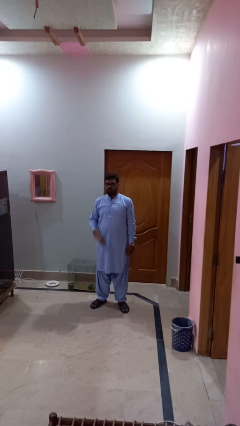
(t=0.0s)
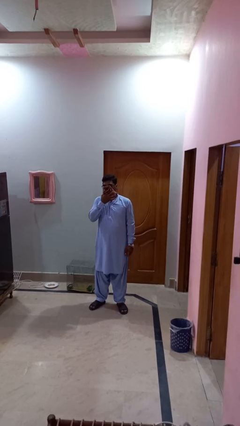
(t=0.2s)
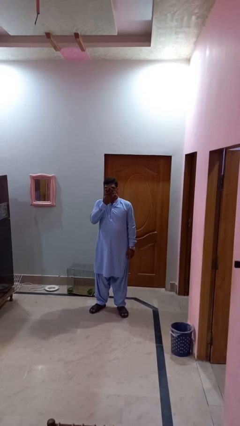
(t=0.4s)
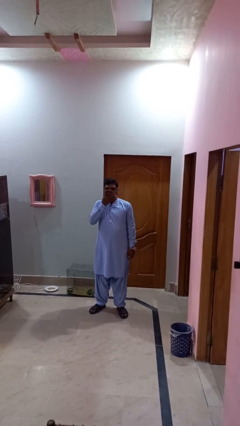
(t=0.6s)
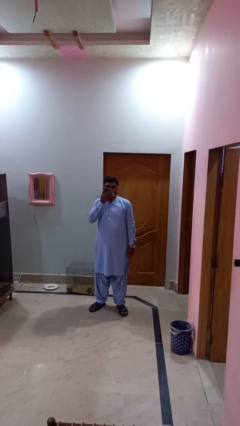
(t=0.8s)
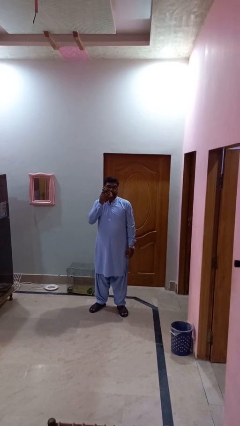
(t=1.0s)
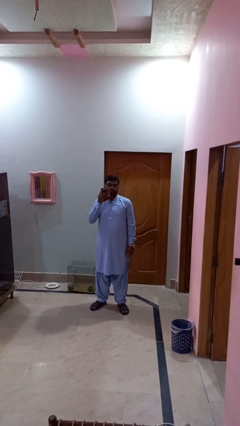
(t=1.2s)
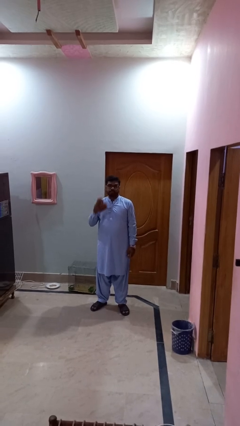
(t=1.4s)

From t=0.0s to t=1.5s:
person wipes mouth with napkin

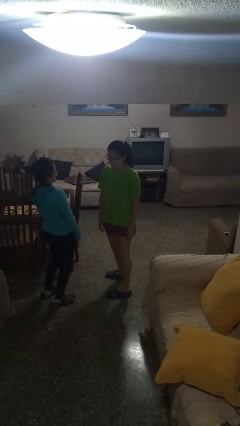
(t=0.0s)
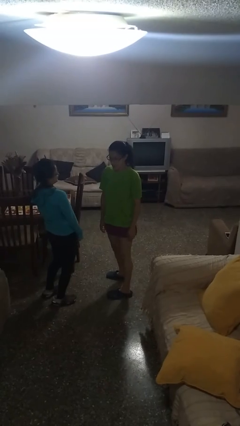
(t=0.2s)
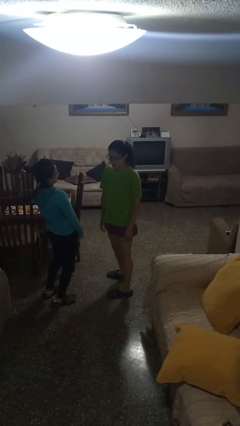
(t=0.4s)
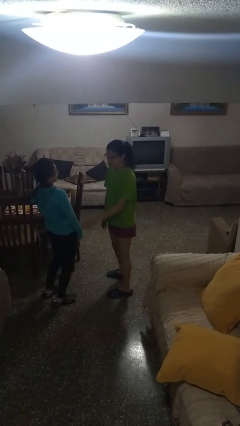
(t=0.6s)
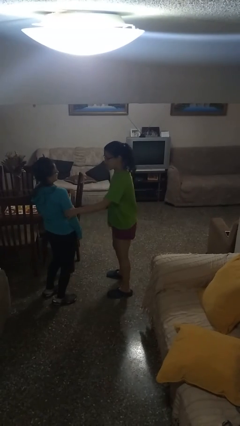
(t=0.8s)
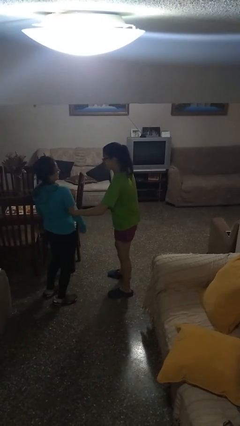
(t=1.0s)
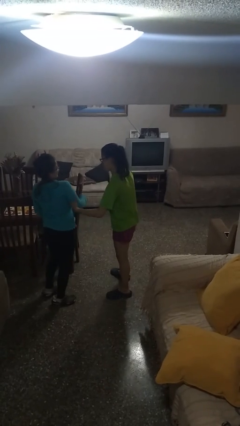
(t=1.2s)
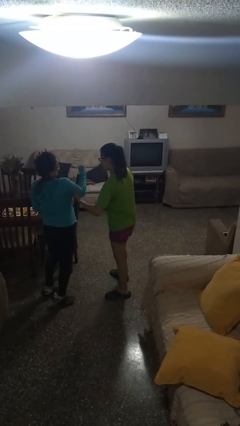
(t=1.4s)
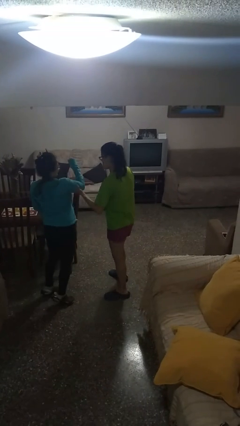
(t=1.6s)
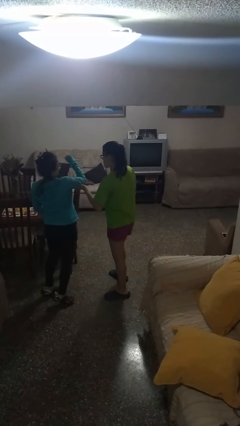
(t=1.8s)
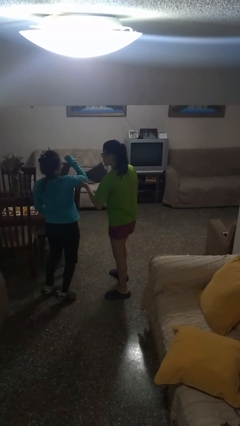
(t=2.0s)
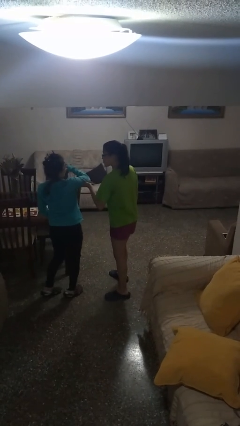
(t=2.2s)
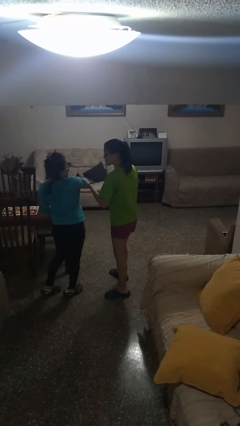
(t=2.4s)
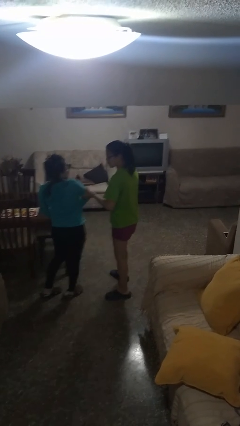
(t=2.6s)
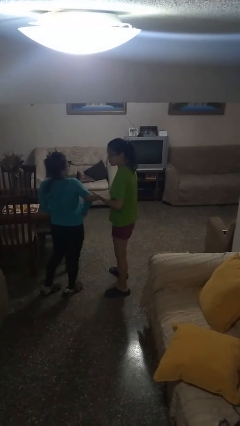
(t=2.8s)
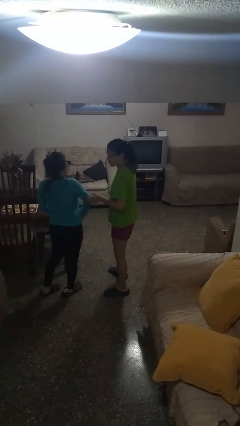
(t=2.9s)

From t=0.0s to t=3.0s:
person grabs person by bicep

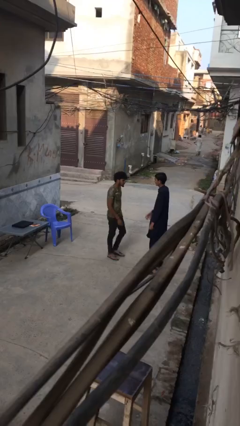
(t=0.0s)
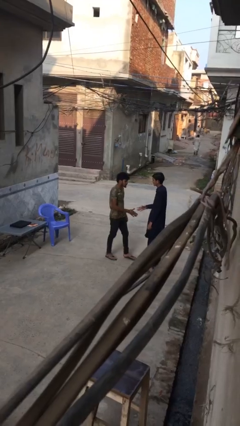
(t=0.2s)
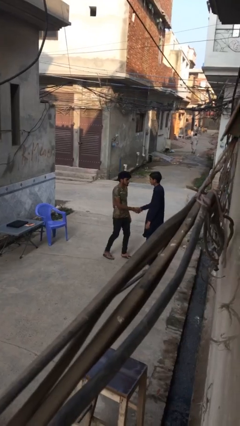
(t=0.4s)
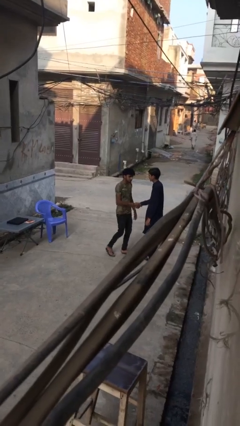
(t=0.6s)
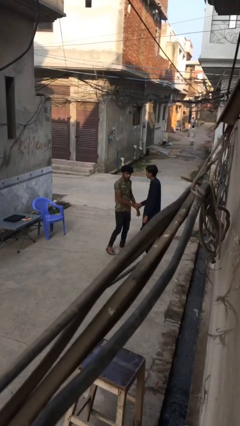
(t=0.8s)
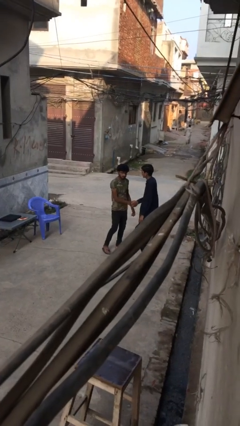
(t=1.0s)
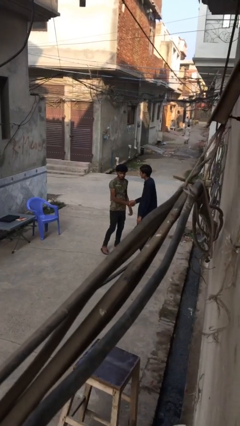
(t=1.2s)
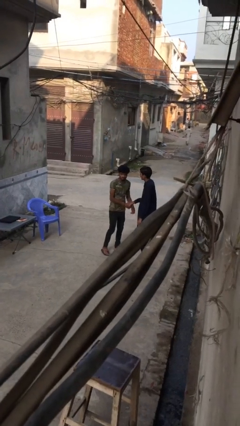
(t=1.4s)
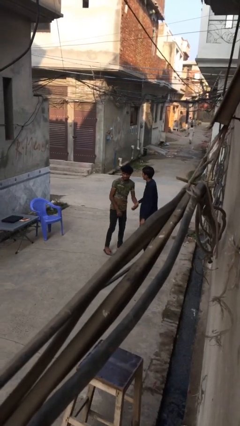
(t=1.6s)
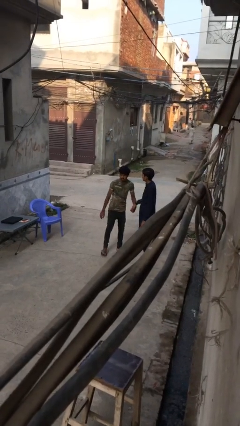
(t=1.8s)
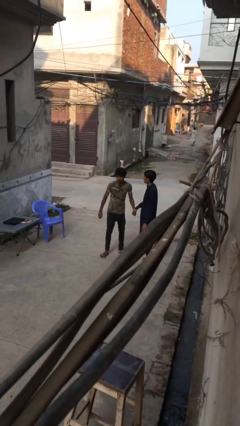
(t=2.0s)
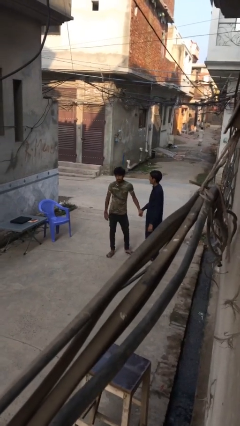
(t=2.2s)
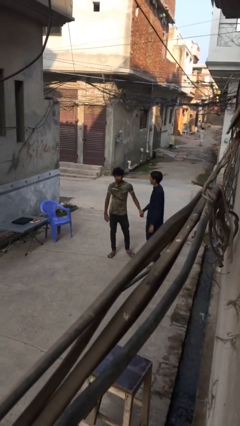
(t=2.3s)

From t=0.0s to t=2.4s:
person shakes hand

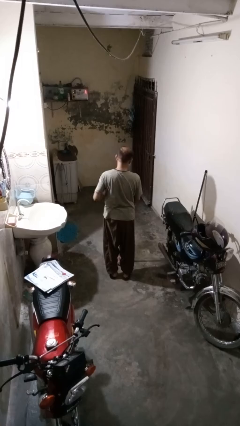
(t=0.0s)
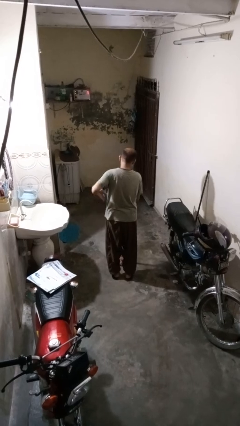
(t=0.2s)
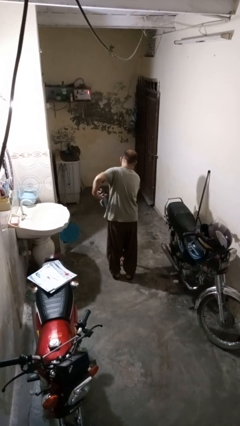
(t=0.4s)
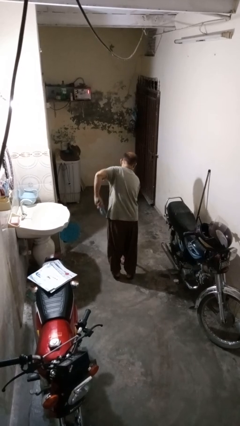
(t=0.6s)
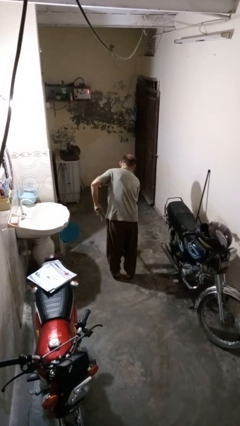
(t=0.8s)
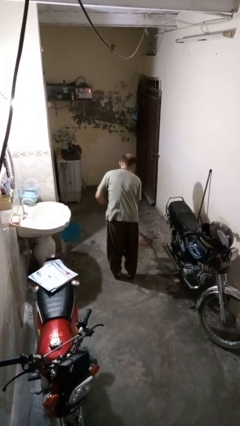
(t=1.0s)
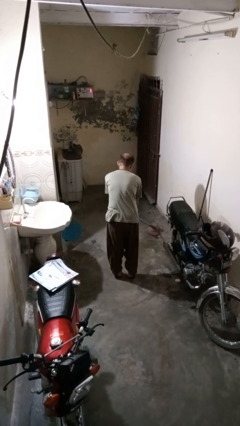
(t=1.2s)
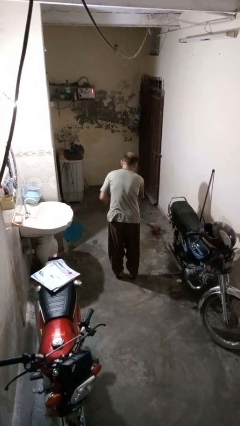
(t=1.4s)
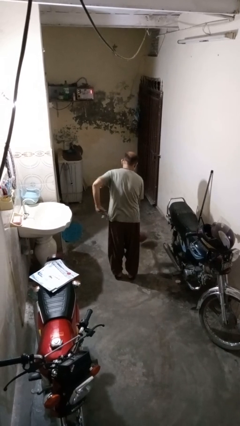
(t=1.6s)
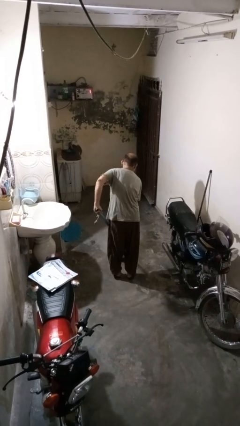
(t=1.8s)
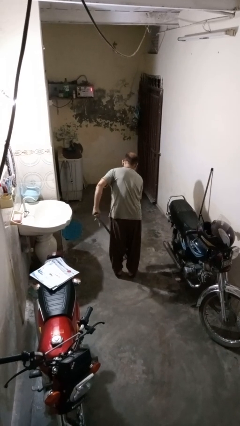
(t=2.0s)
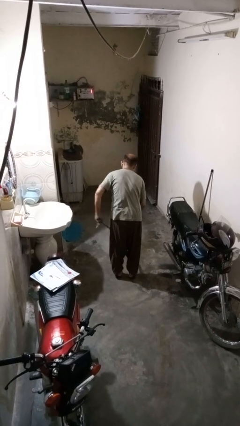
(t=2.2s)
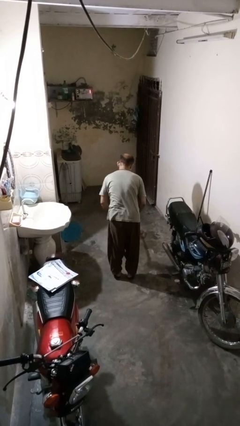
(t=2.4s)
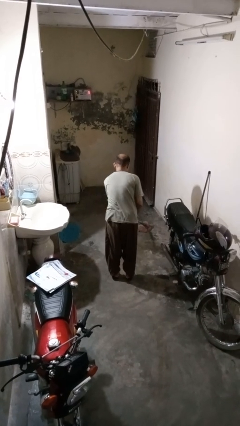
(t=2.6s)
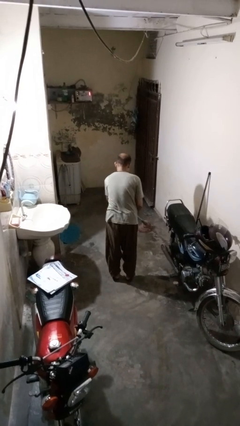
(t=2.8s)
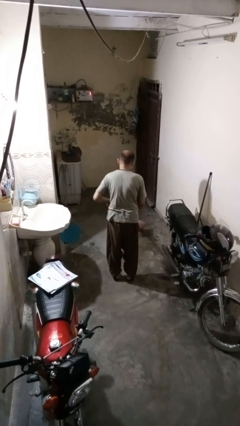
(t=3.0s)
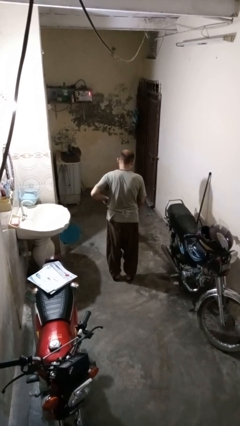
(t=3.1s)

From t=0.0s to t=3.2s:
person mops

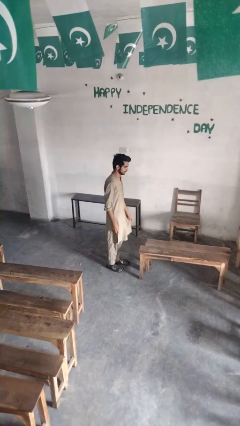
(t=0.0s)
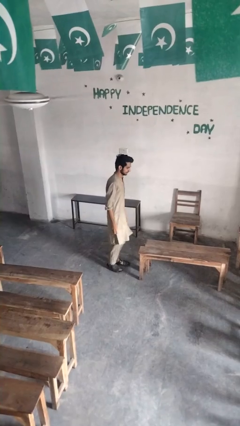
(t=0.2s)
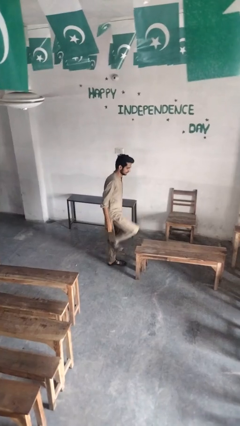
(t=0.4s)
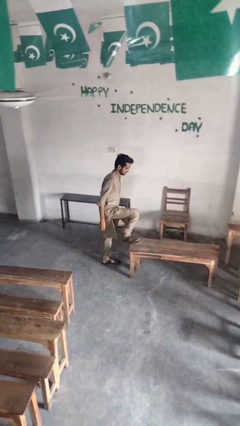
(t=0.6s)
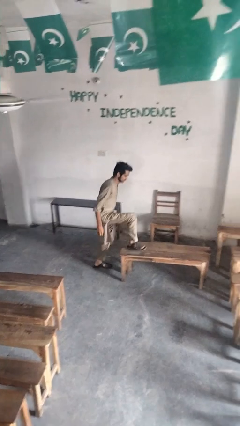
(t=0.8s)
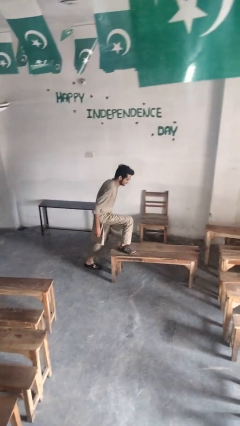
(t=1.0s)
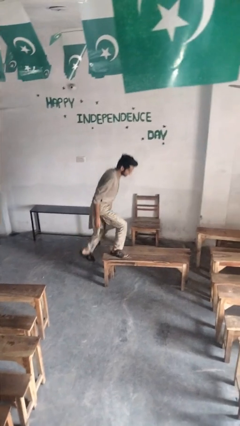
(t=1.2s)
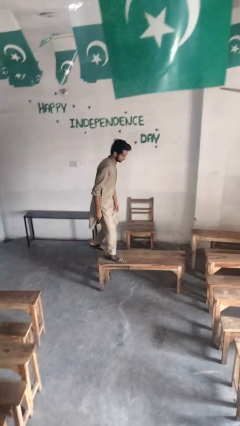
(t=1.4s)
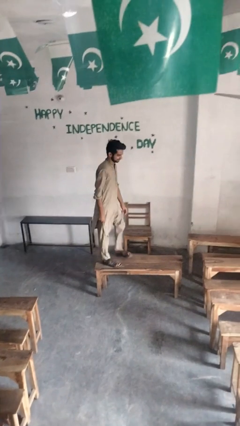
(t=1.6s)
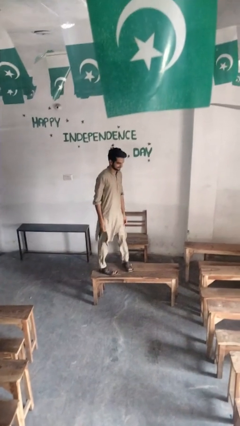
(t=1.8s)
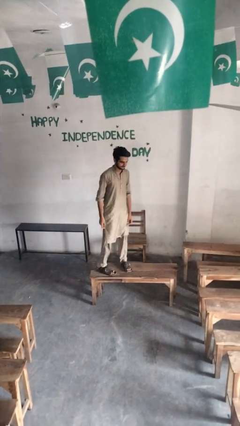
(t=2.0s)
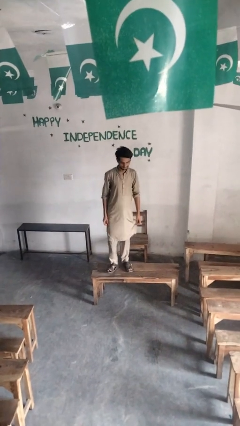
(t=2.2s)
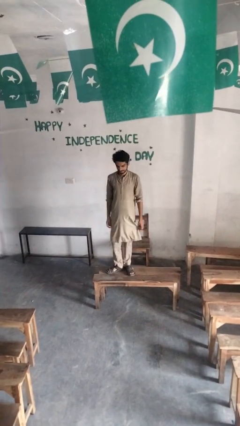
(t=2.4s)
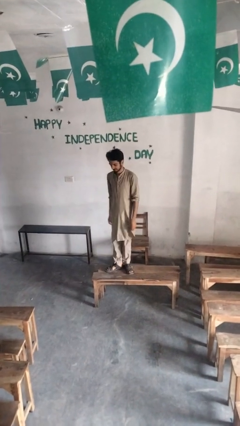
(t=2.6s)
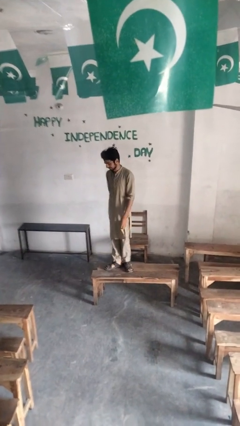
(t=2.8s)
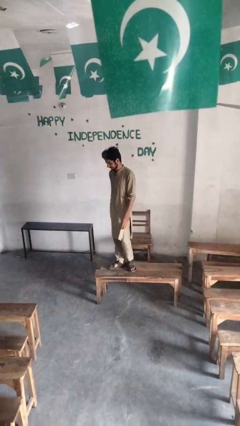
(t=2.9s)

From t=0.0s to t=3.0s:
person climbs on table

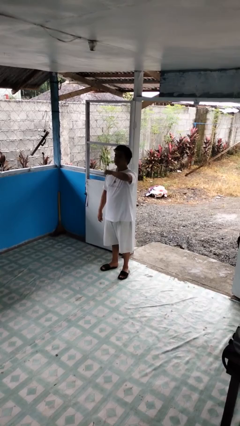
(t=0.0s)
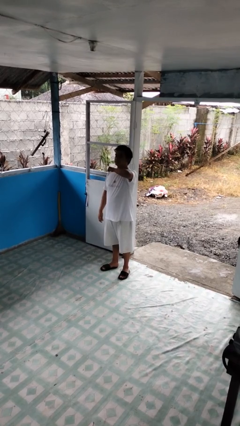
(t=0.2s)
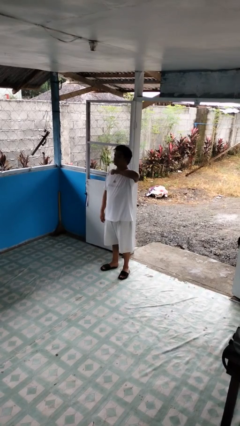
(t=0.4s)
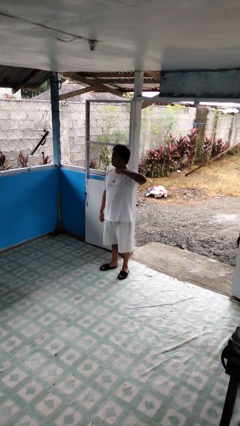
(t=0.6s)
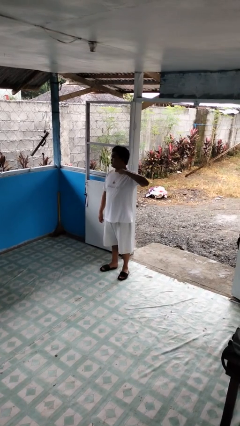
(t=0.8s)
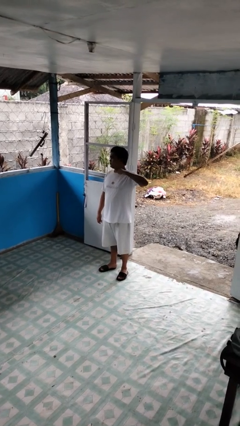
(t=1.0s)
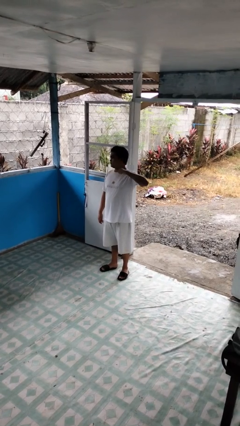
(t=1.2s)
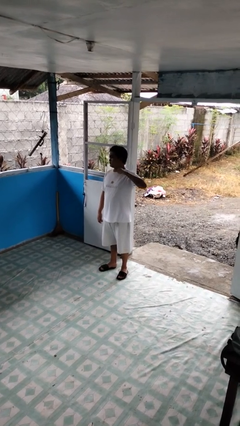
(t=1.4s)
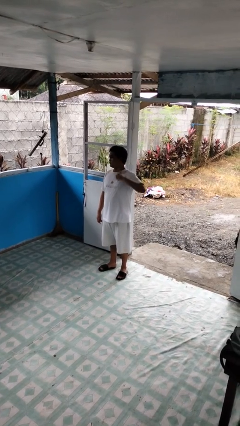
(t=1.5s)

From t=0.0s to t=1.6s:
person gestures cut

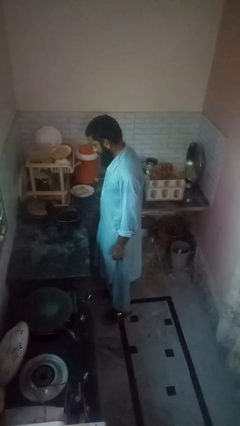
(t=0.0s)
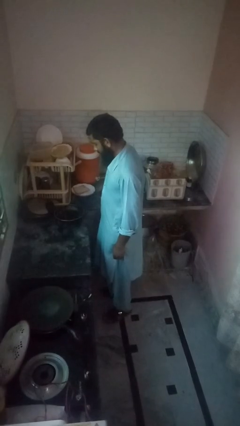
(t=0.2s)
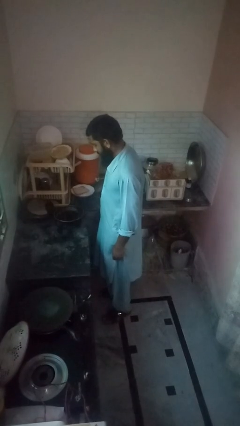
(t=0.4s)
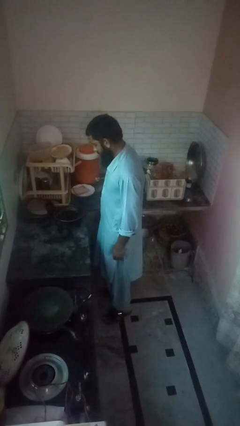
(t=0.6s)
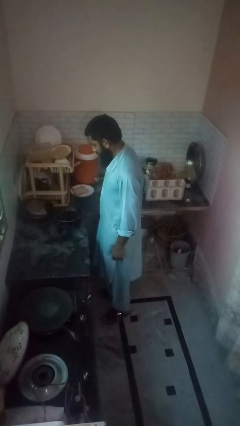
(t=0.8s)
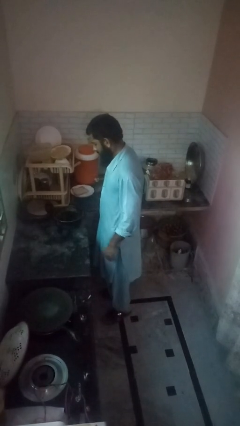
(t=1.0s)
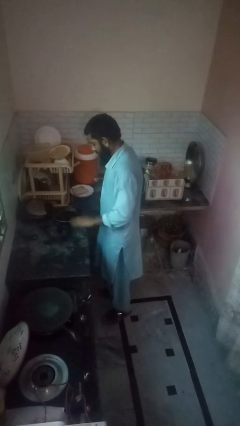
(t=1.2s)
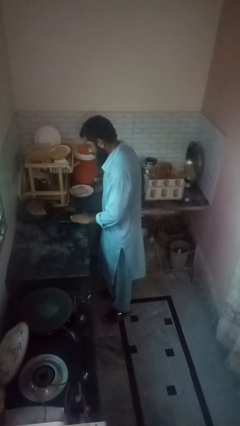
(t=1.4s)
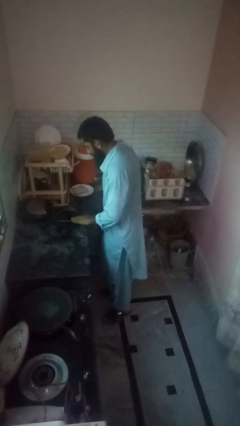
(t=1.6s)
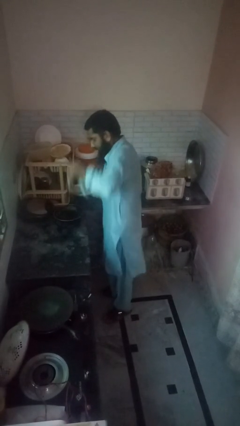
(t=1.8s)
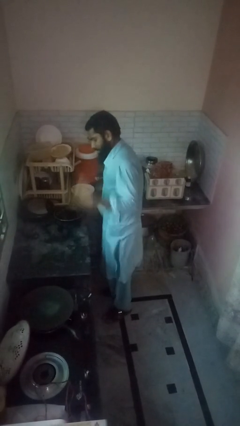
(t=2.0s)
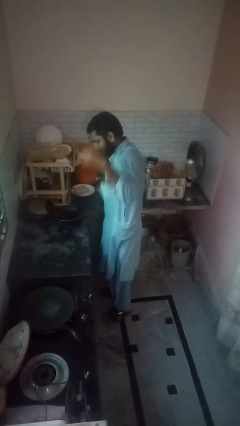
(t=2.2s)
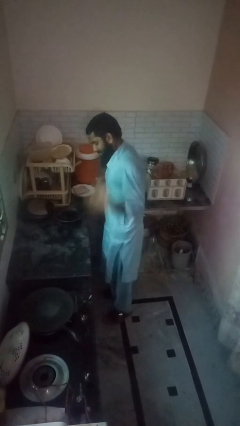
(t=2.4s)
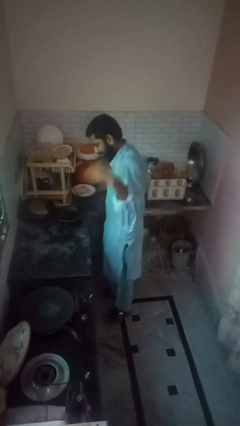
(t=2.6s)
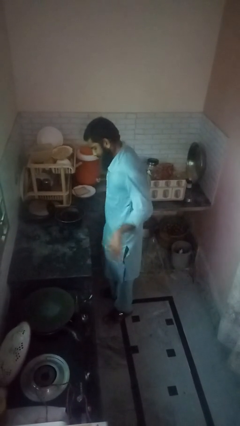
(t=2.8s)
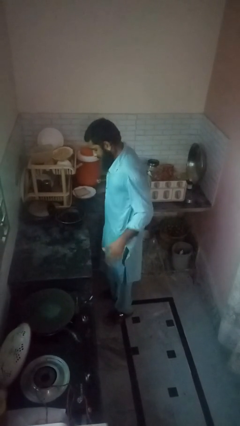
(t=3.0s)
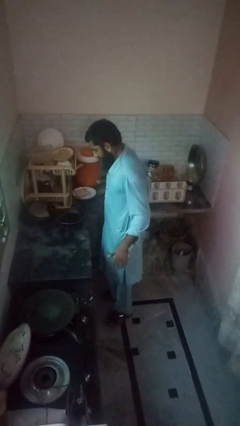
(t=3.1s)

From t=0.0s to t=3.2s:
person burns hand
